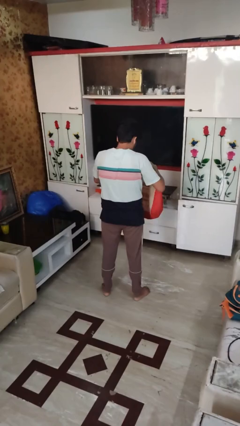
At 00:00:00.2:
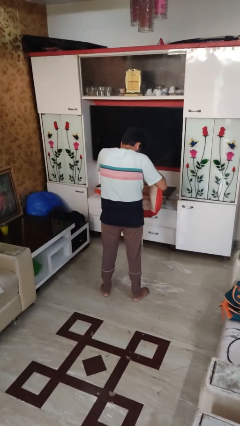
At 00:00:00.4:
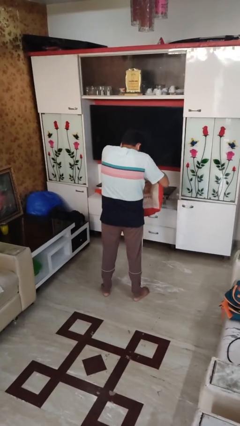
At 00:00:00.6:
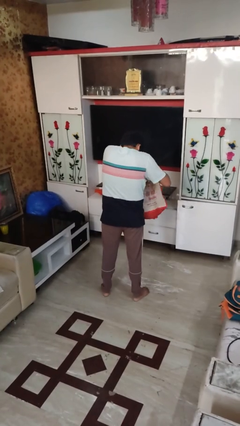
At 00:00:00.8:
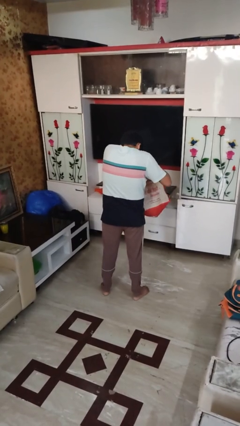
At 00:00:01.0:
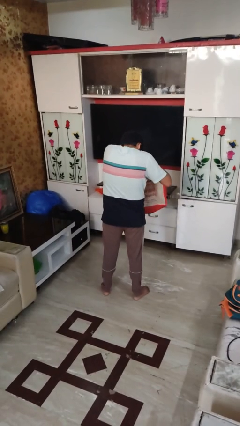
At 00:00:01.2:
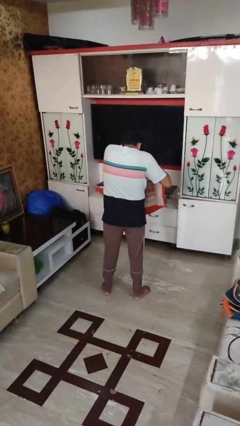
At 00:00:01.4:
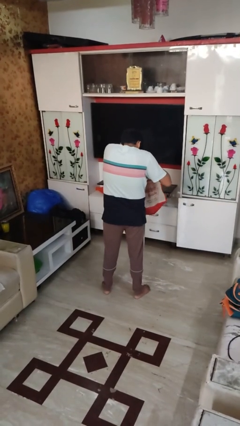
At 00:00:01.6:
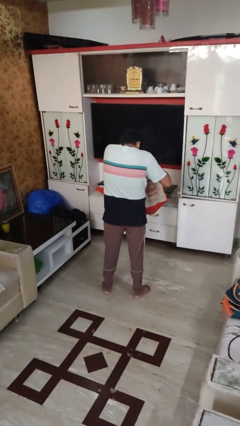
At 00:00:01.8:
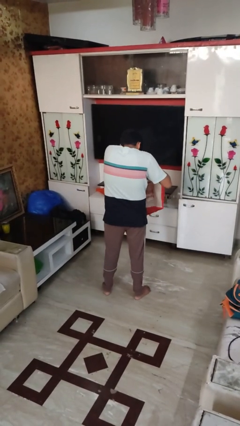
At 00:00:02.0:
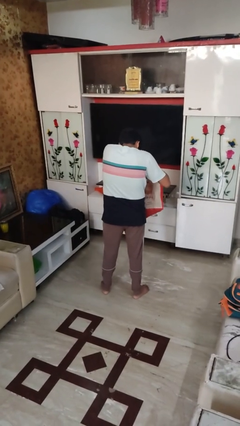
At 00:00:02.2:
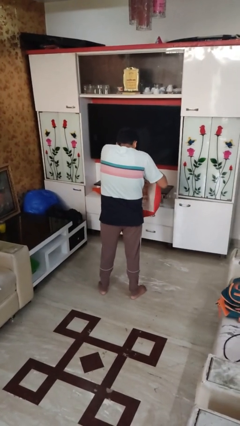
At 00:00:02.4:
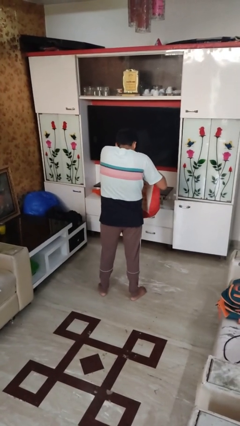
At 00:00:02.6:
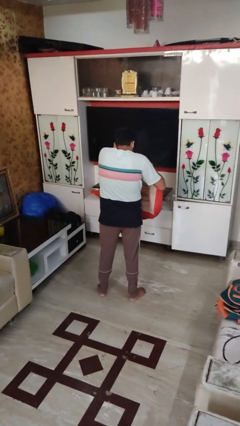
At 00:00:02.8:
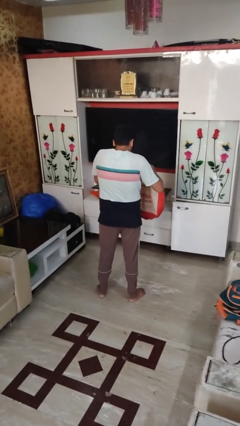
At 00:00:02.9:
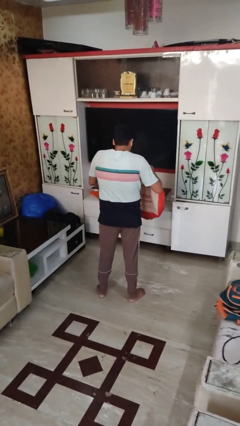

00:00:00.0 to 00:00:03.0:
person searches in bag

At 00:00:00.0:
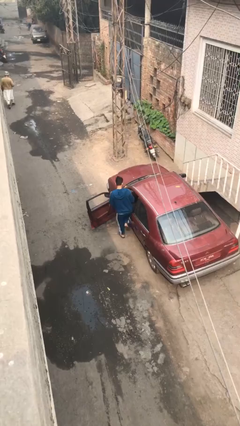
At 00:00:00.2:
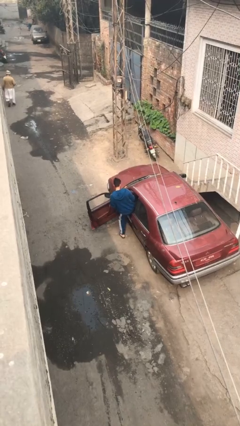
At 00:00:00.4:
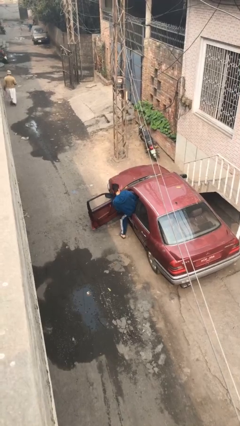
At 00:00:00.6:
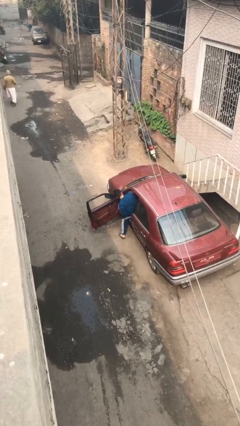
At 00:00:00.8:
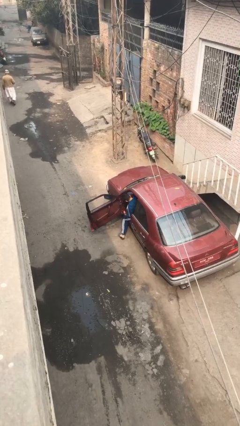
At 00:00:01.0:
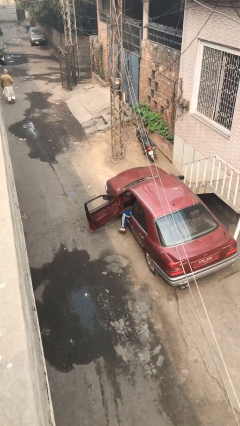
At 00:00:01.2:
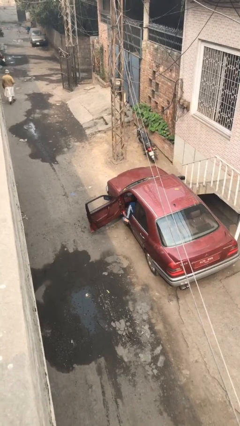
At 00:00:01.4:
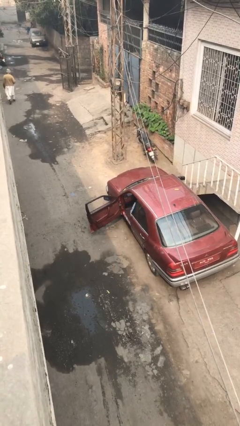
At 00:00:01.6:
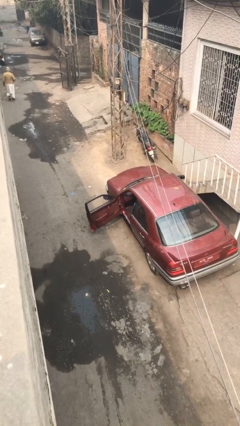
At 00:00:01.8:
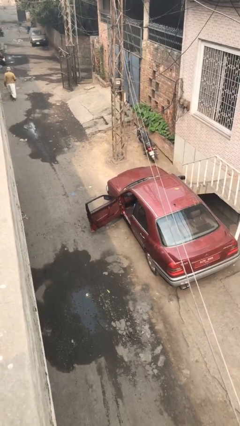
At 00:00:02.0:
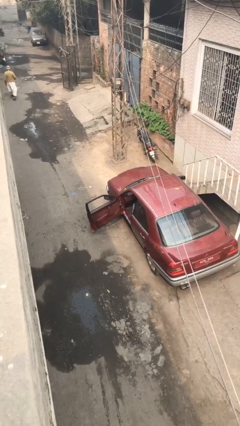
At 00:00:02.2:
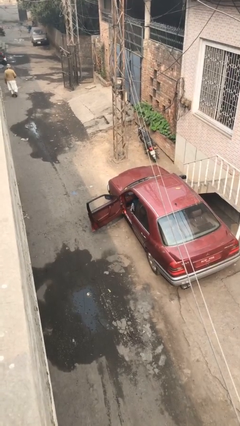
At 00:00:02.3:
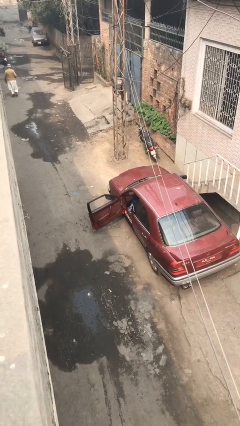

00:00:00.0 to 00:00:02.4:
person enters car

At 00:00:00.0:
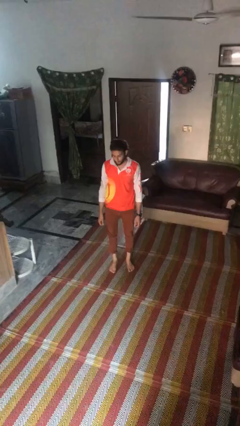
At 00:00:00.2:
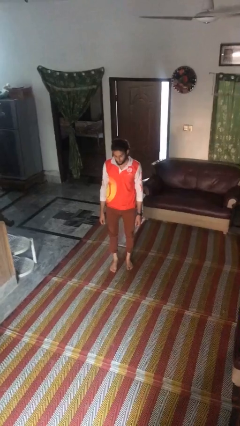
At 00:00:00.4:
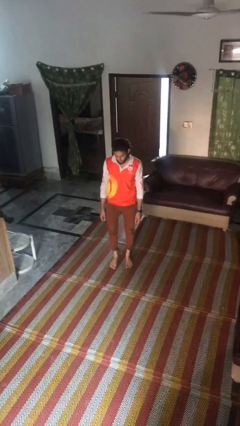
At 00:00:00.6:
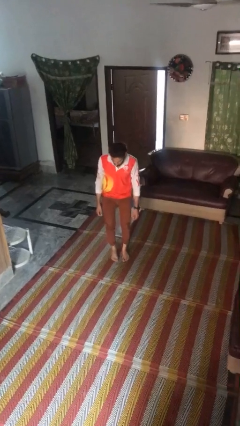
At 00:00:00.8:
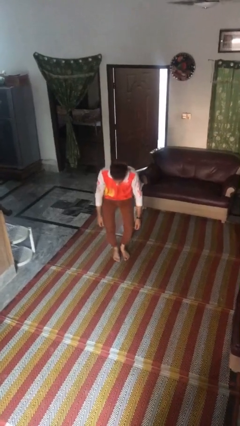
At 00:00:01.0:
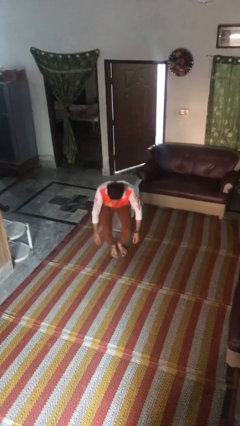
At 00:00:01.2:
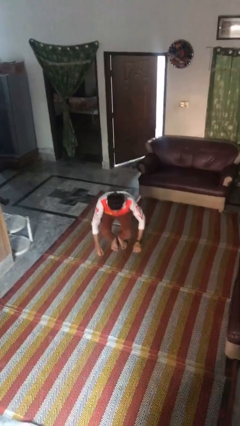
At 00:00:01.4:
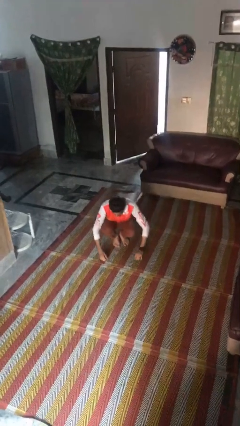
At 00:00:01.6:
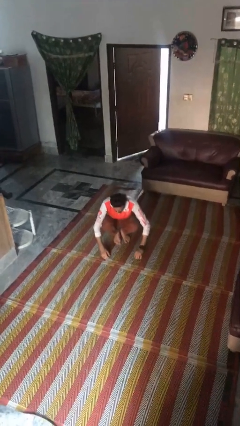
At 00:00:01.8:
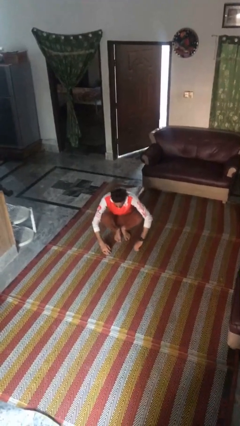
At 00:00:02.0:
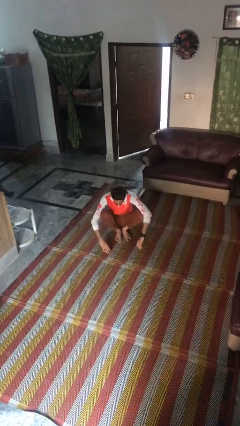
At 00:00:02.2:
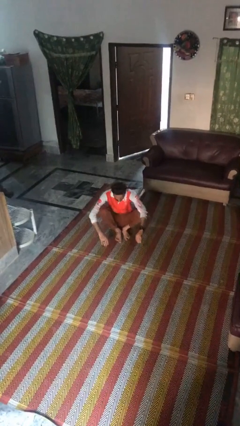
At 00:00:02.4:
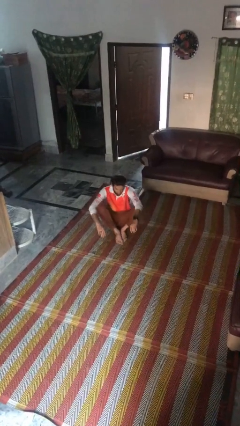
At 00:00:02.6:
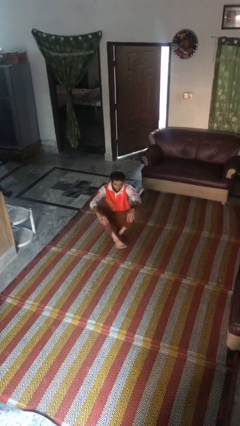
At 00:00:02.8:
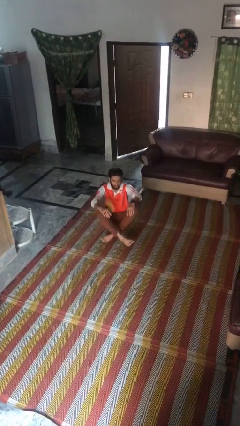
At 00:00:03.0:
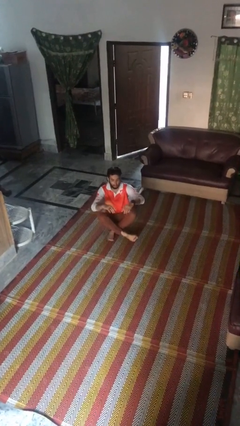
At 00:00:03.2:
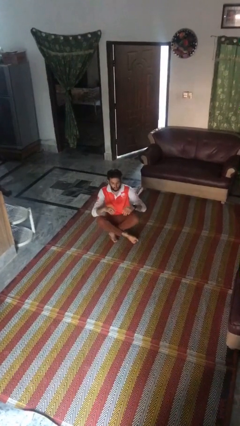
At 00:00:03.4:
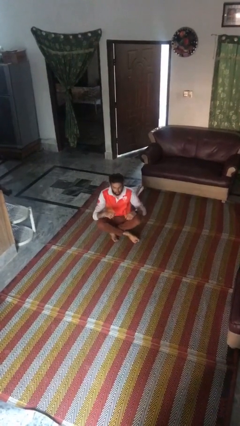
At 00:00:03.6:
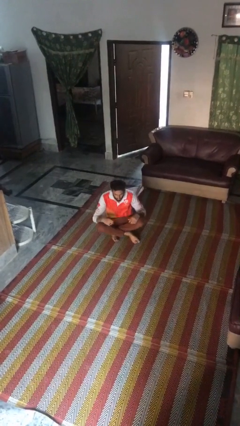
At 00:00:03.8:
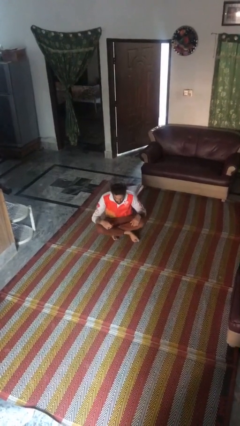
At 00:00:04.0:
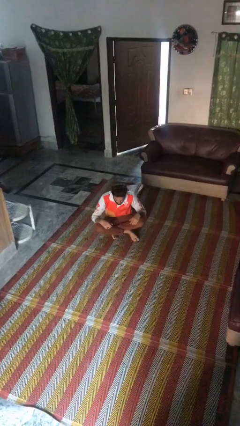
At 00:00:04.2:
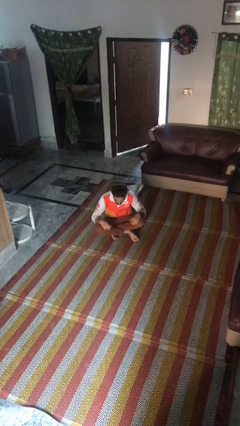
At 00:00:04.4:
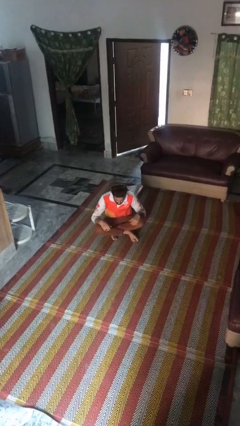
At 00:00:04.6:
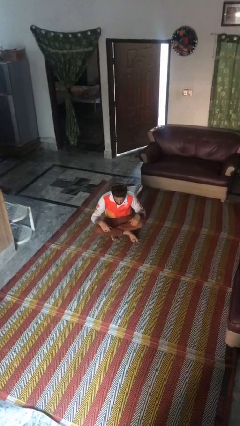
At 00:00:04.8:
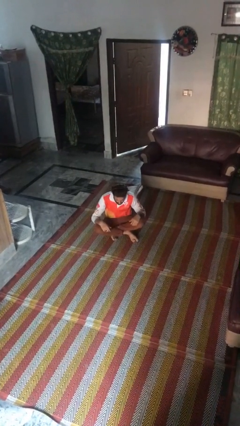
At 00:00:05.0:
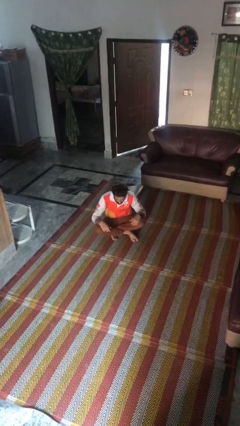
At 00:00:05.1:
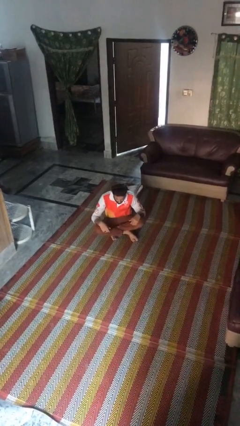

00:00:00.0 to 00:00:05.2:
person sits crisscross

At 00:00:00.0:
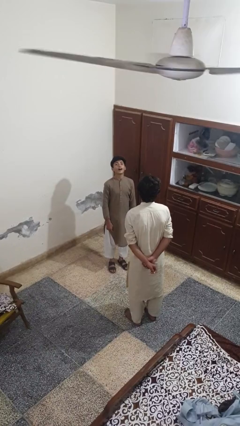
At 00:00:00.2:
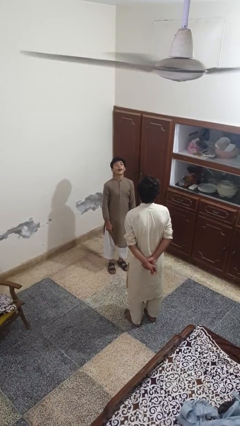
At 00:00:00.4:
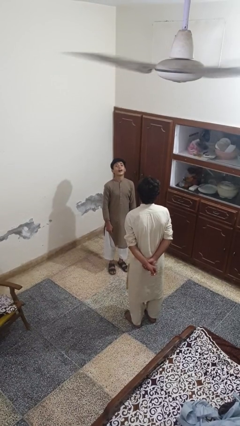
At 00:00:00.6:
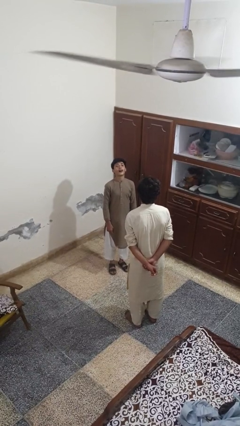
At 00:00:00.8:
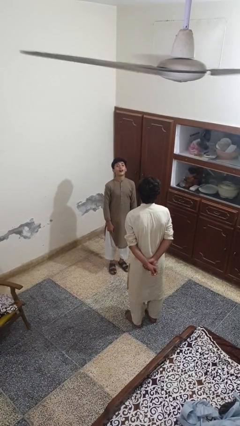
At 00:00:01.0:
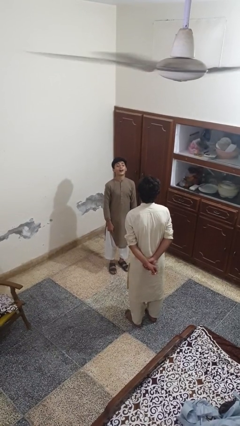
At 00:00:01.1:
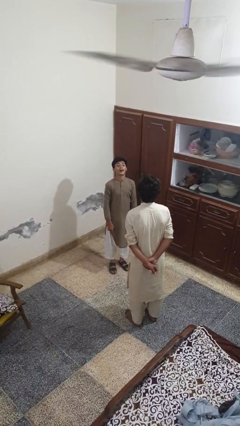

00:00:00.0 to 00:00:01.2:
person laughs with person

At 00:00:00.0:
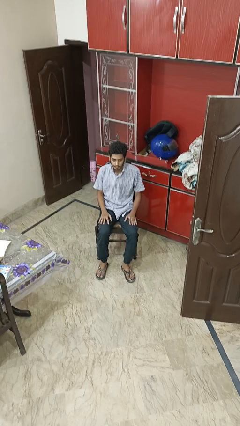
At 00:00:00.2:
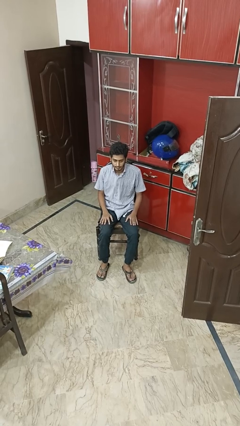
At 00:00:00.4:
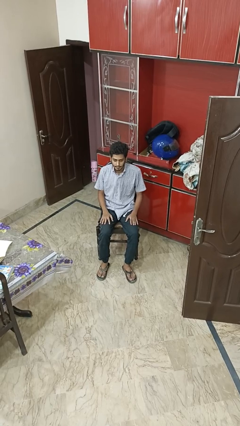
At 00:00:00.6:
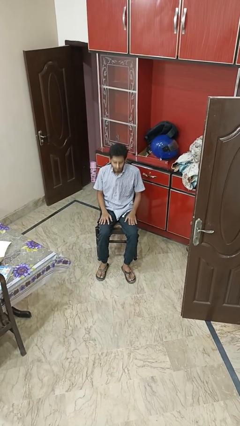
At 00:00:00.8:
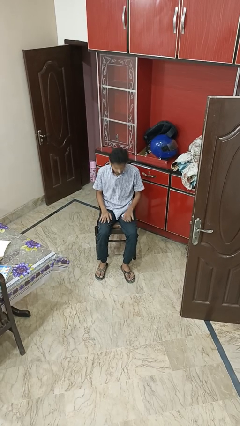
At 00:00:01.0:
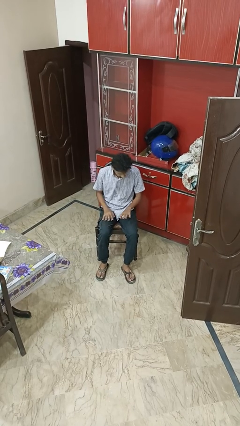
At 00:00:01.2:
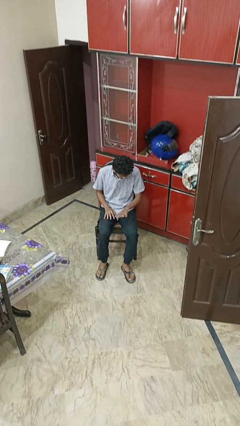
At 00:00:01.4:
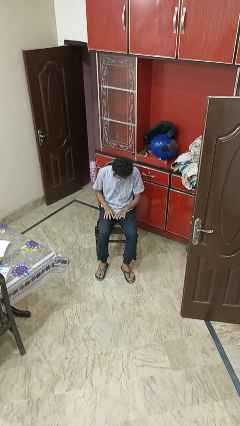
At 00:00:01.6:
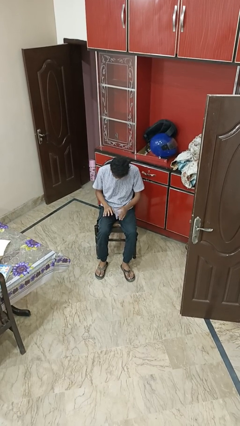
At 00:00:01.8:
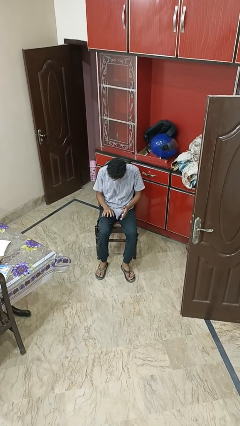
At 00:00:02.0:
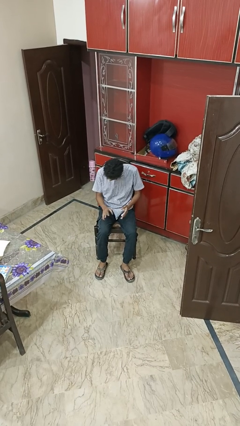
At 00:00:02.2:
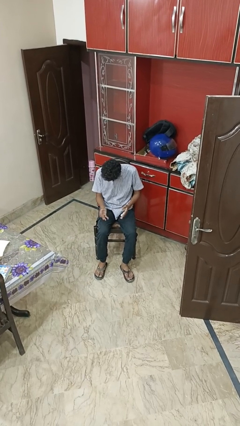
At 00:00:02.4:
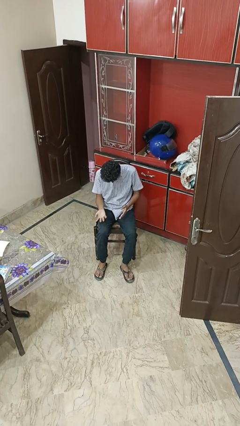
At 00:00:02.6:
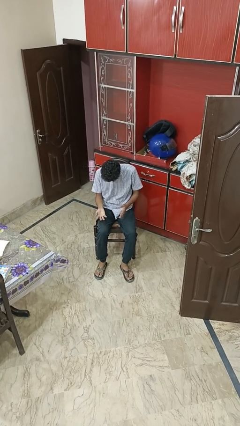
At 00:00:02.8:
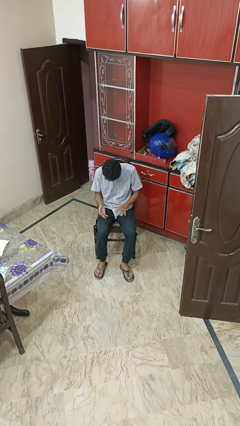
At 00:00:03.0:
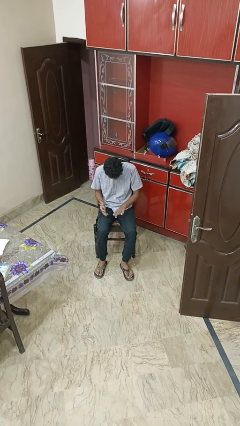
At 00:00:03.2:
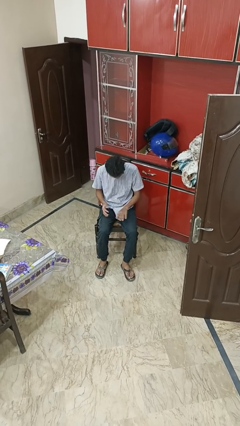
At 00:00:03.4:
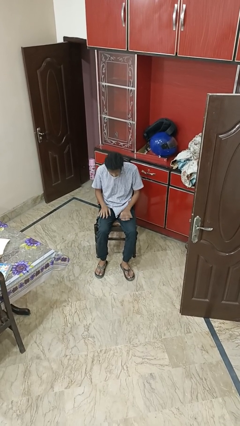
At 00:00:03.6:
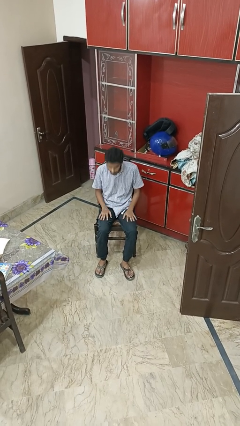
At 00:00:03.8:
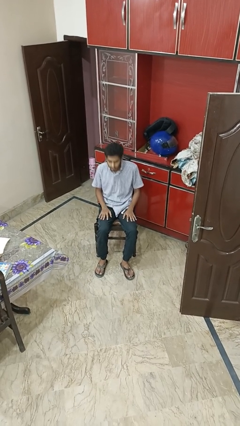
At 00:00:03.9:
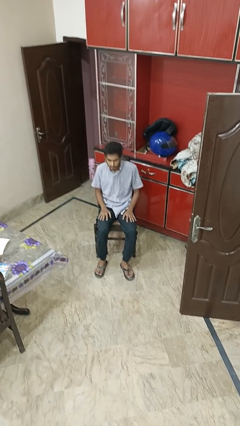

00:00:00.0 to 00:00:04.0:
person looks at hands in lap

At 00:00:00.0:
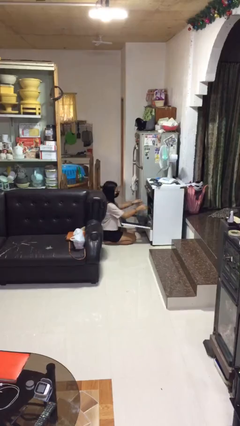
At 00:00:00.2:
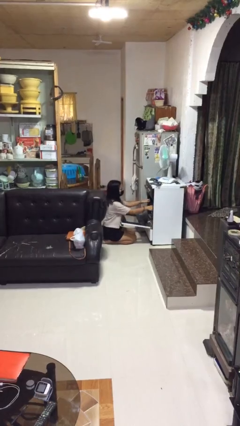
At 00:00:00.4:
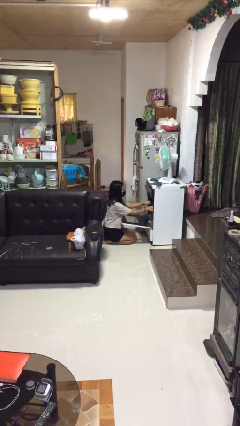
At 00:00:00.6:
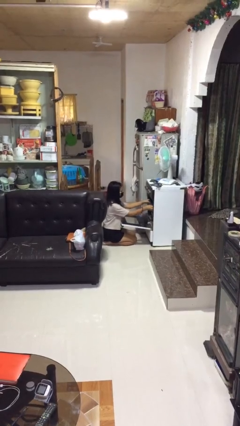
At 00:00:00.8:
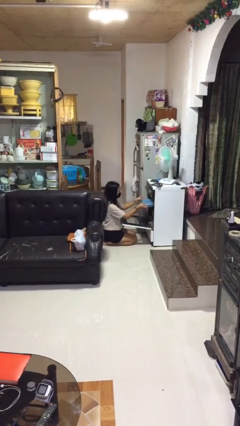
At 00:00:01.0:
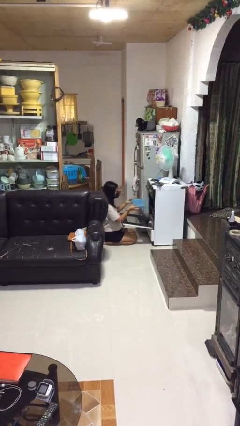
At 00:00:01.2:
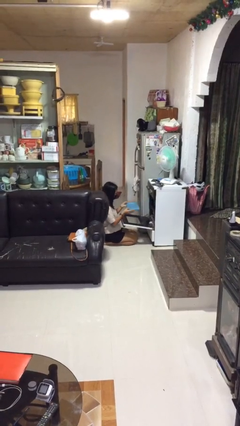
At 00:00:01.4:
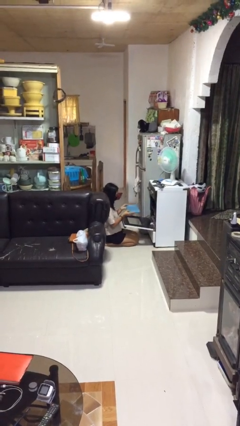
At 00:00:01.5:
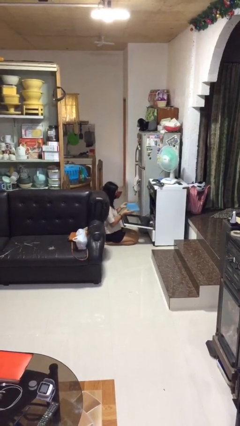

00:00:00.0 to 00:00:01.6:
person takes object from oven
